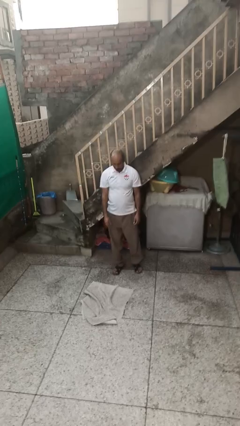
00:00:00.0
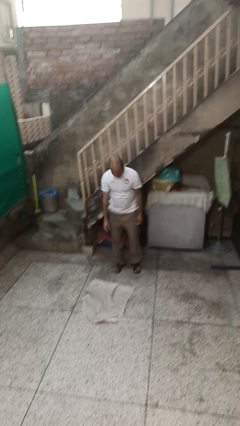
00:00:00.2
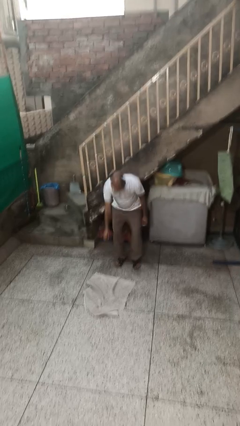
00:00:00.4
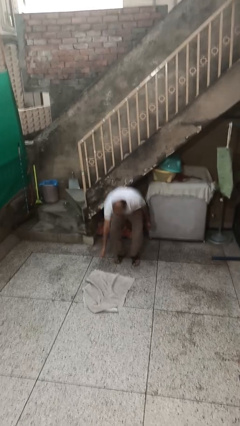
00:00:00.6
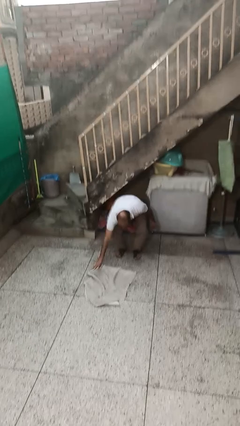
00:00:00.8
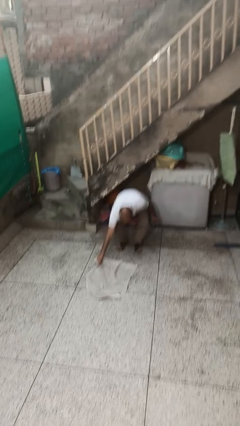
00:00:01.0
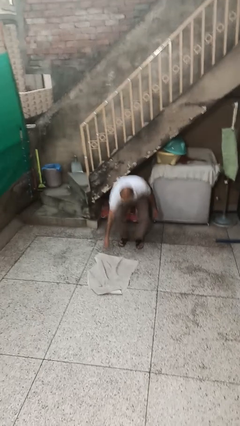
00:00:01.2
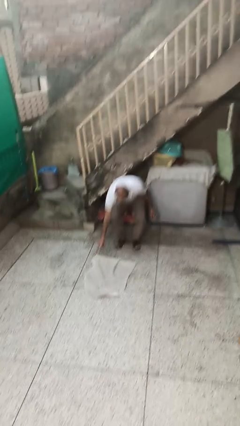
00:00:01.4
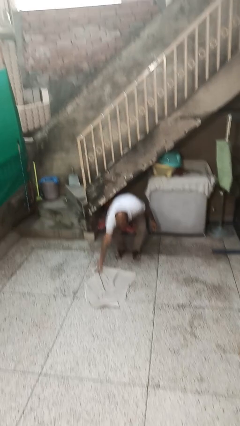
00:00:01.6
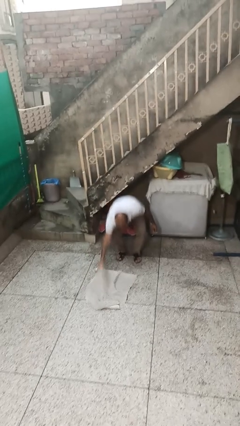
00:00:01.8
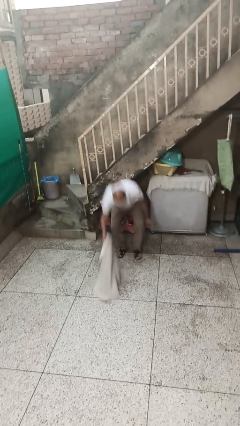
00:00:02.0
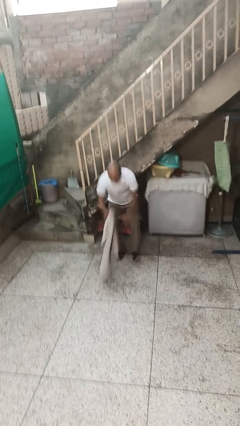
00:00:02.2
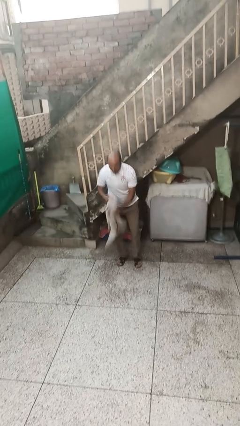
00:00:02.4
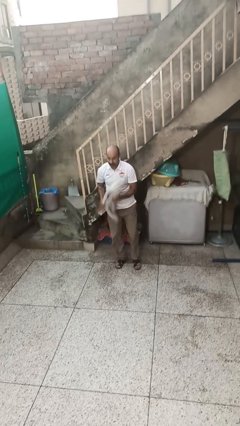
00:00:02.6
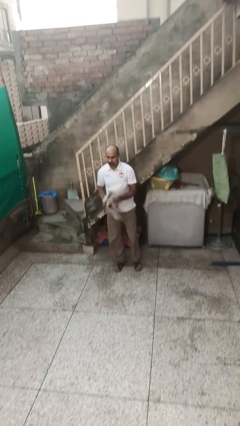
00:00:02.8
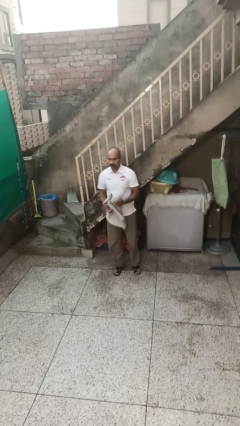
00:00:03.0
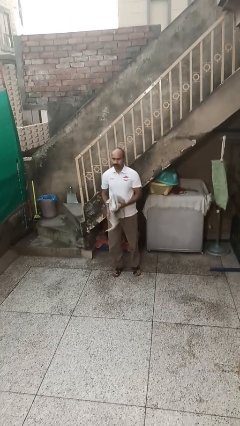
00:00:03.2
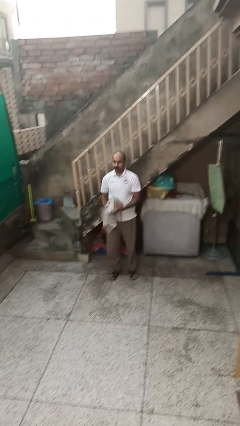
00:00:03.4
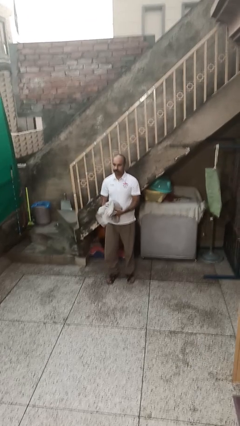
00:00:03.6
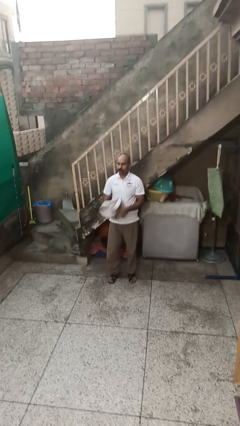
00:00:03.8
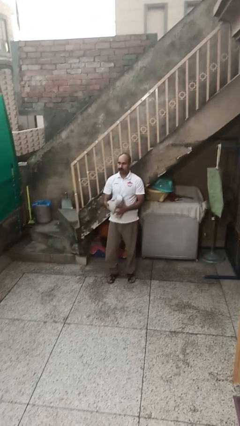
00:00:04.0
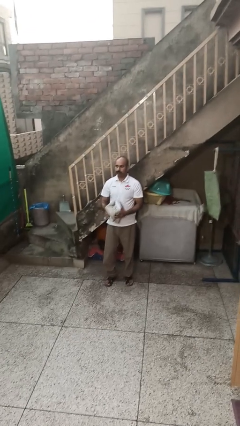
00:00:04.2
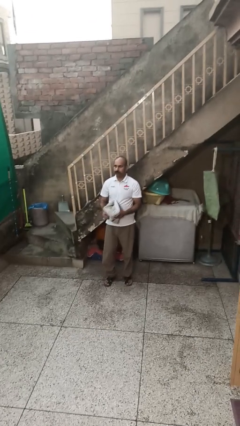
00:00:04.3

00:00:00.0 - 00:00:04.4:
person picks up object from floor

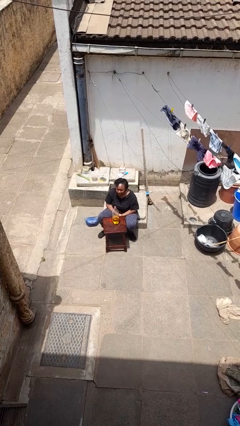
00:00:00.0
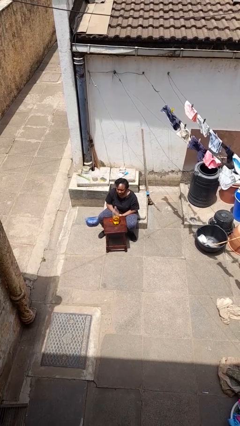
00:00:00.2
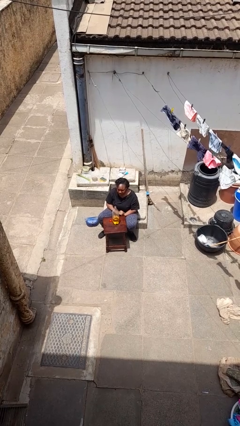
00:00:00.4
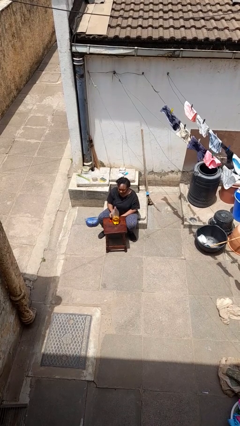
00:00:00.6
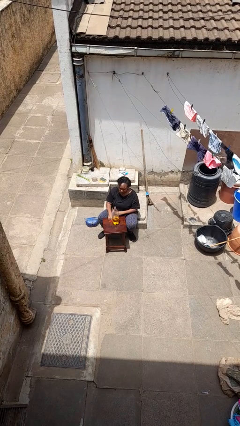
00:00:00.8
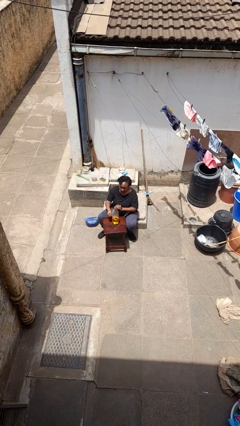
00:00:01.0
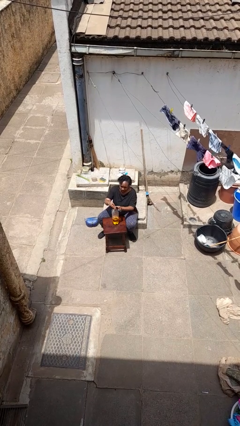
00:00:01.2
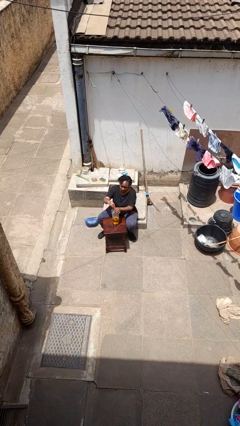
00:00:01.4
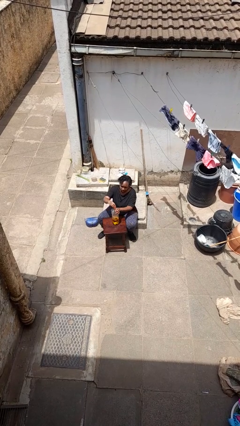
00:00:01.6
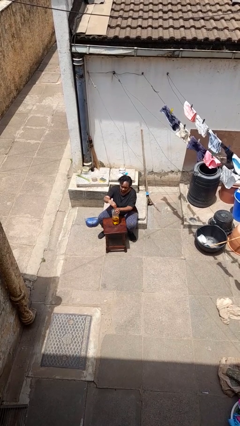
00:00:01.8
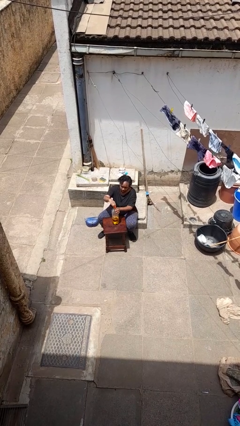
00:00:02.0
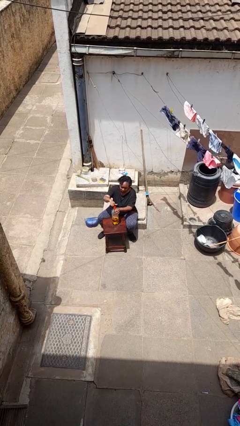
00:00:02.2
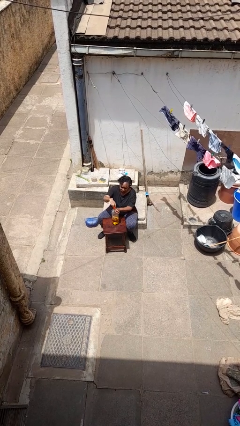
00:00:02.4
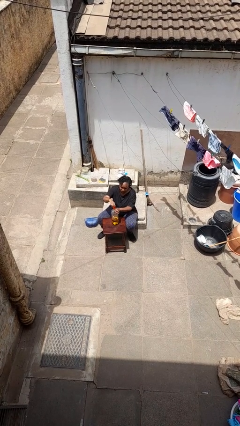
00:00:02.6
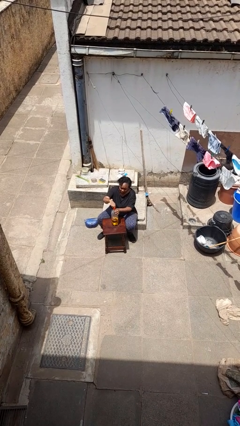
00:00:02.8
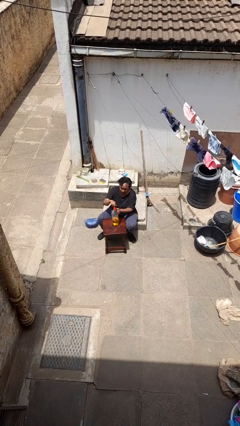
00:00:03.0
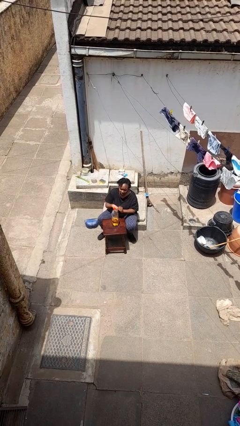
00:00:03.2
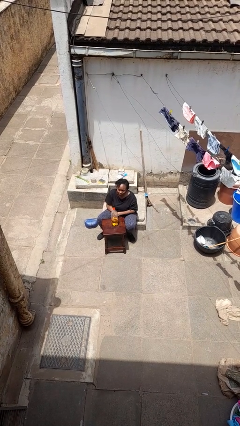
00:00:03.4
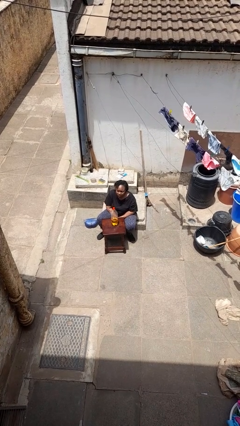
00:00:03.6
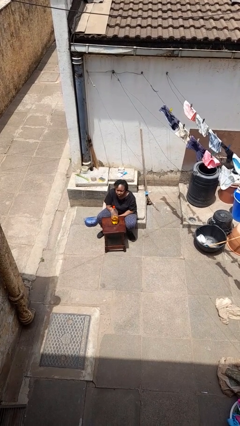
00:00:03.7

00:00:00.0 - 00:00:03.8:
person screws lid to bottle

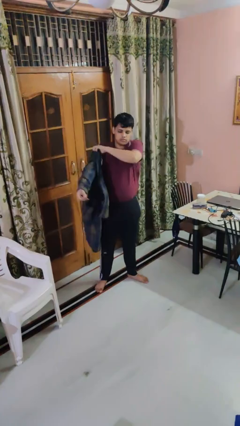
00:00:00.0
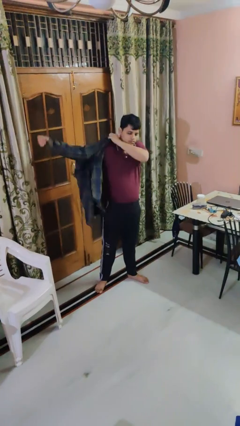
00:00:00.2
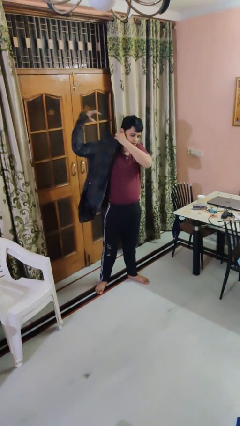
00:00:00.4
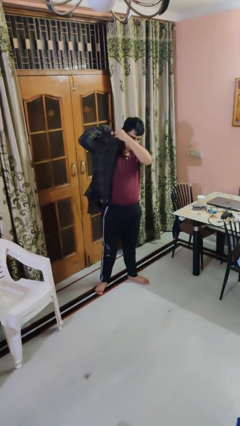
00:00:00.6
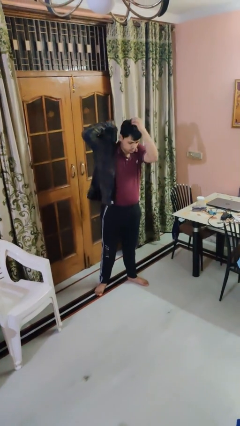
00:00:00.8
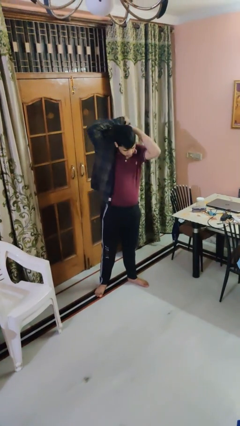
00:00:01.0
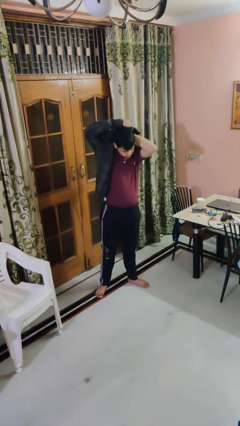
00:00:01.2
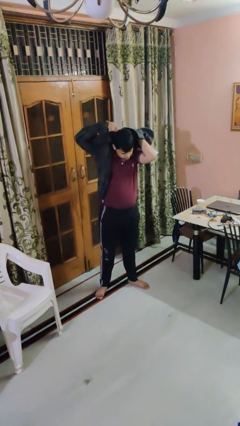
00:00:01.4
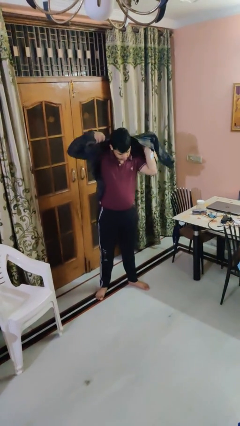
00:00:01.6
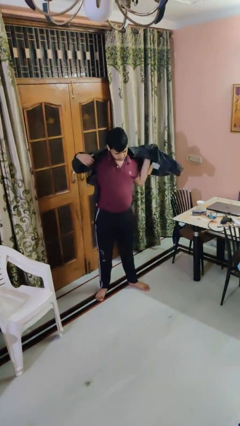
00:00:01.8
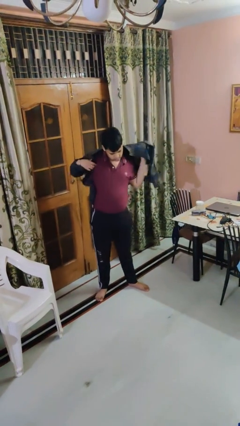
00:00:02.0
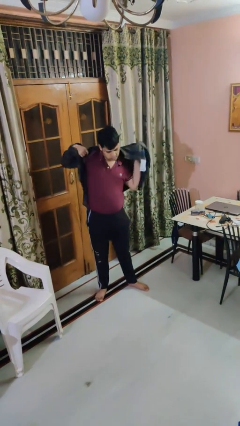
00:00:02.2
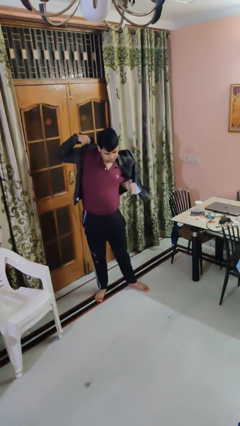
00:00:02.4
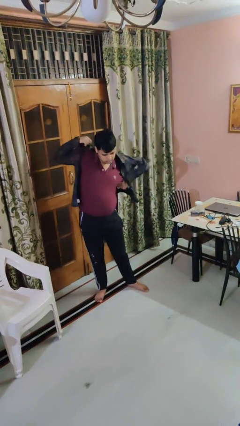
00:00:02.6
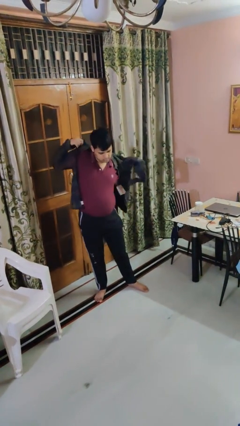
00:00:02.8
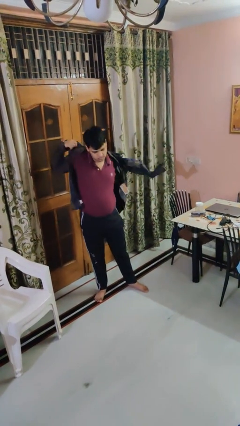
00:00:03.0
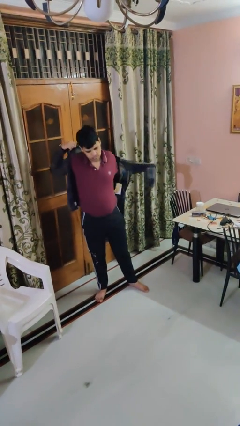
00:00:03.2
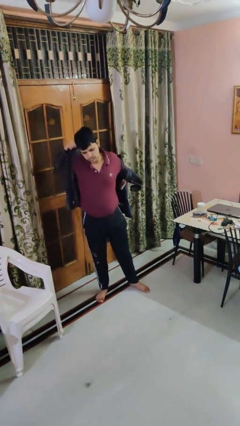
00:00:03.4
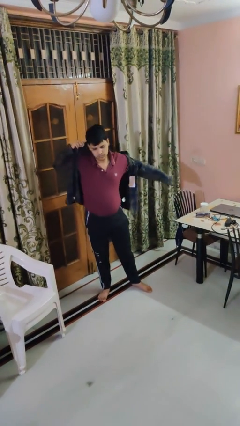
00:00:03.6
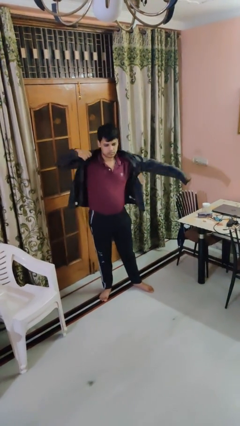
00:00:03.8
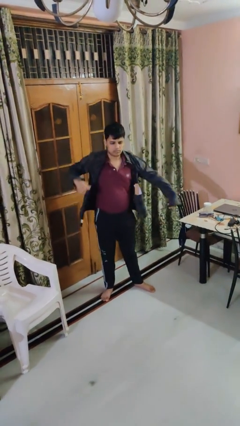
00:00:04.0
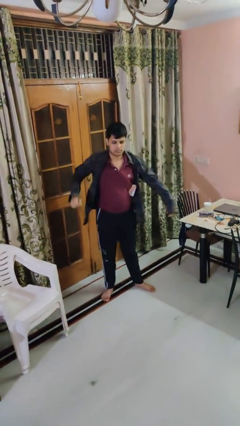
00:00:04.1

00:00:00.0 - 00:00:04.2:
person puts on shirt

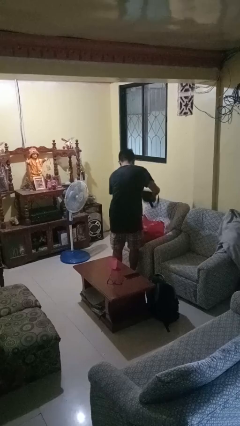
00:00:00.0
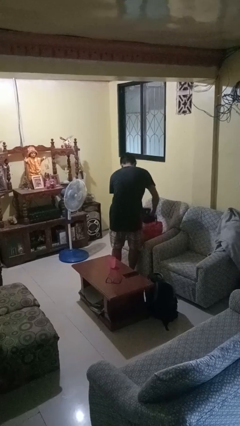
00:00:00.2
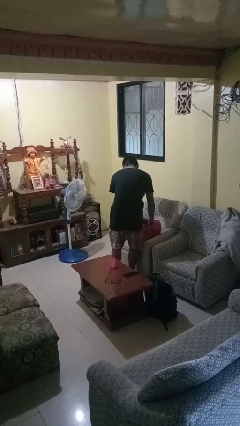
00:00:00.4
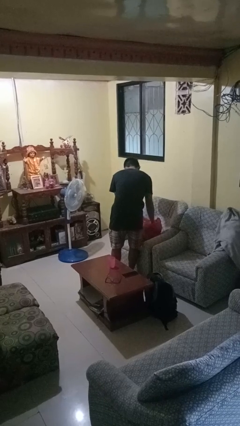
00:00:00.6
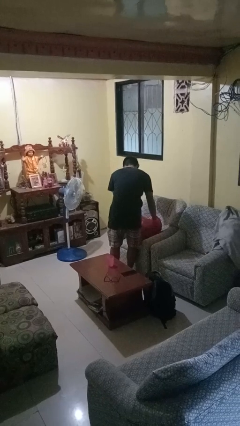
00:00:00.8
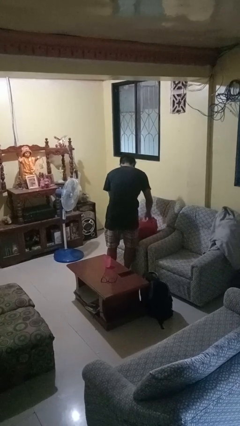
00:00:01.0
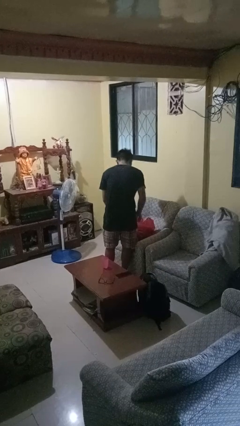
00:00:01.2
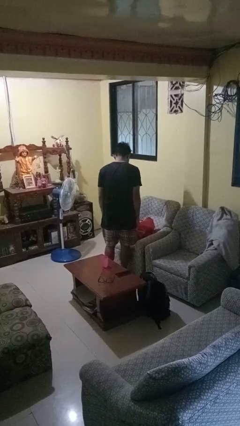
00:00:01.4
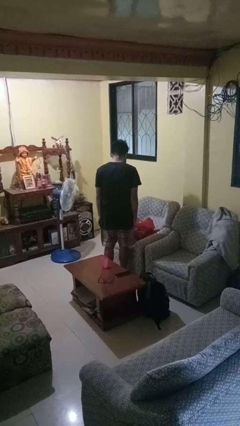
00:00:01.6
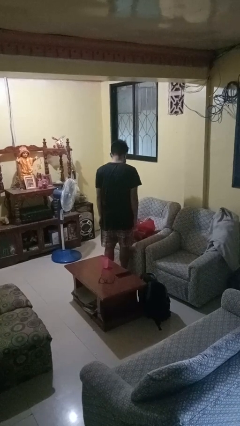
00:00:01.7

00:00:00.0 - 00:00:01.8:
person puts object into bag

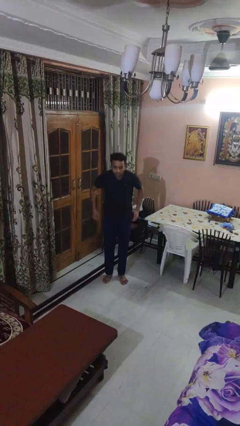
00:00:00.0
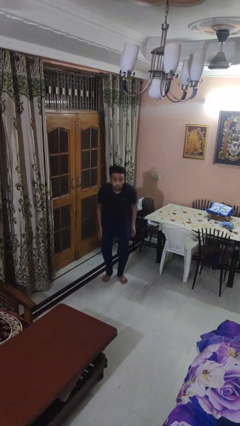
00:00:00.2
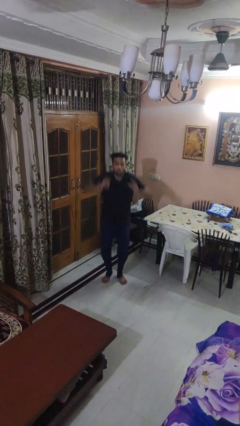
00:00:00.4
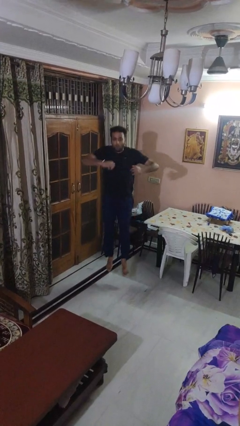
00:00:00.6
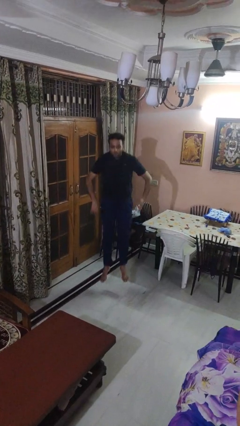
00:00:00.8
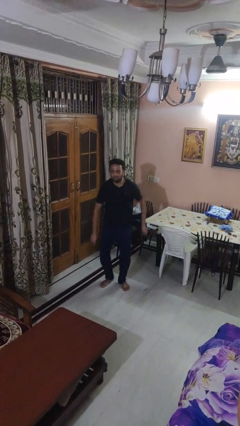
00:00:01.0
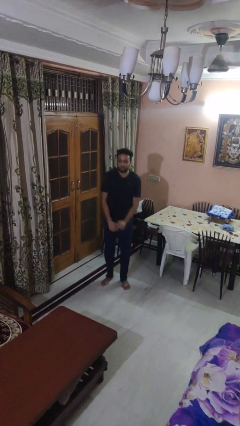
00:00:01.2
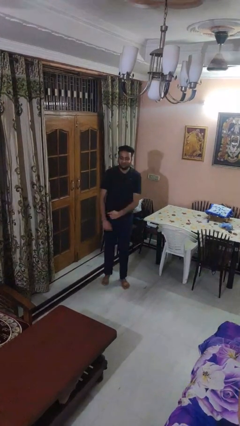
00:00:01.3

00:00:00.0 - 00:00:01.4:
person jumps

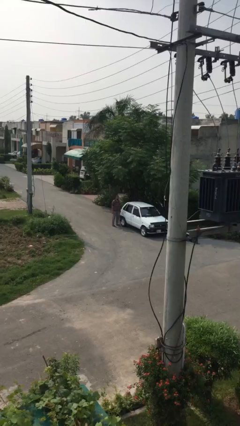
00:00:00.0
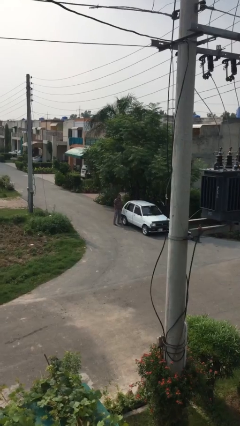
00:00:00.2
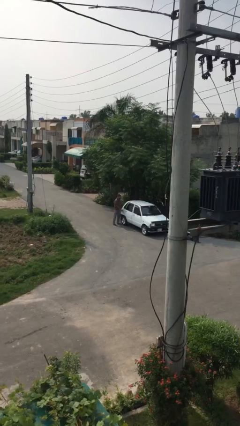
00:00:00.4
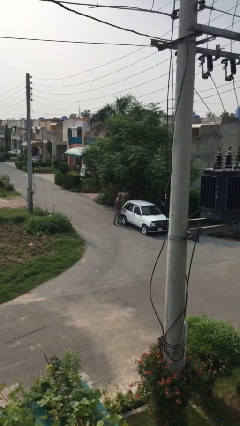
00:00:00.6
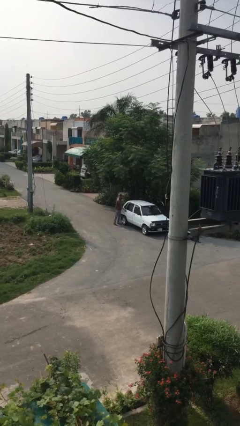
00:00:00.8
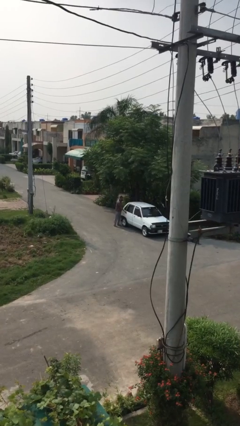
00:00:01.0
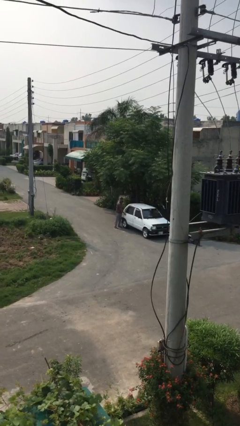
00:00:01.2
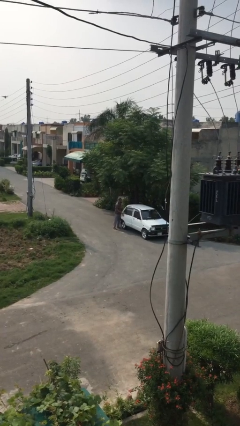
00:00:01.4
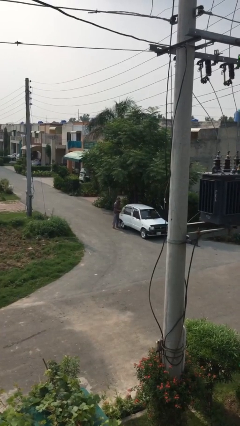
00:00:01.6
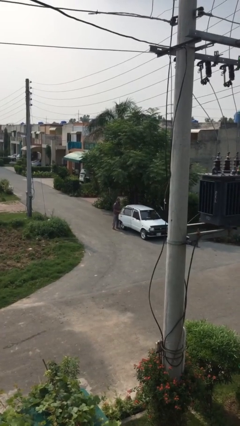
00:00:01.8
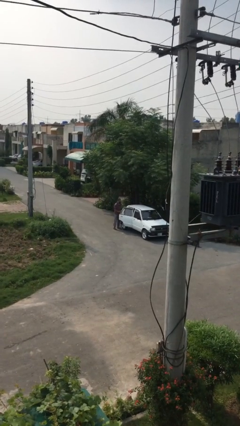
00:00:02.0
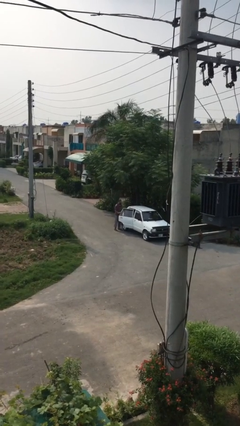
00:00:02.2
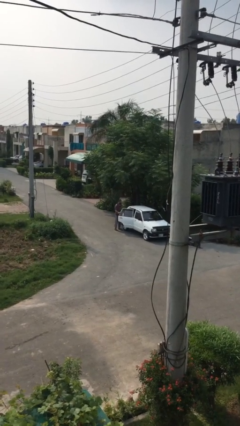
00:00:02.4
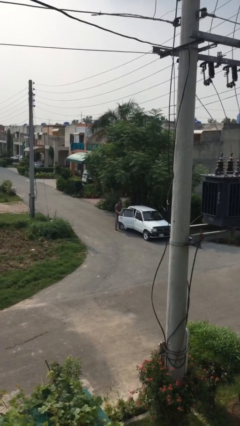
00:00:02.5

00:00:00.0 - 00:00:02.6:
person opens car door
